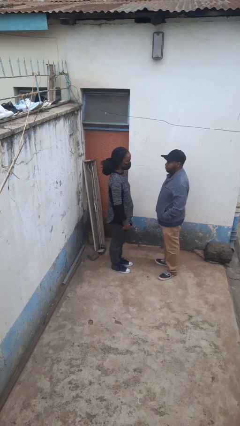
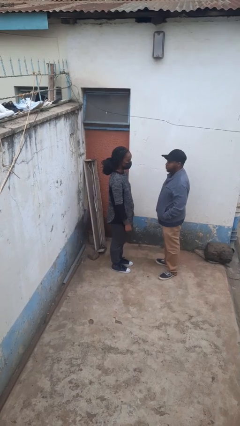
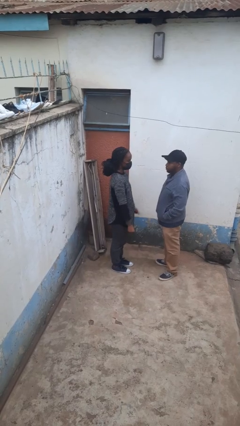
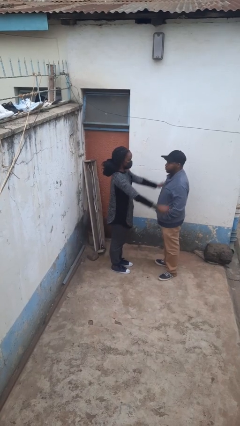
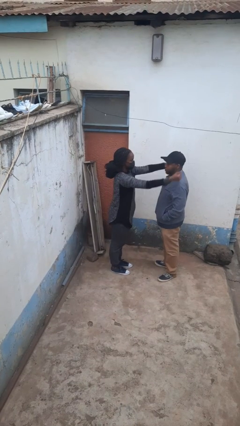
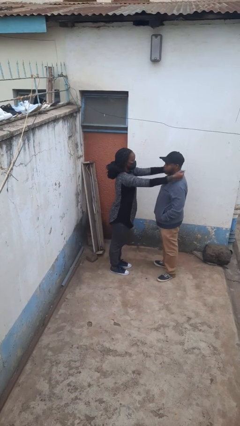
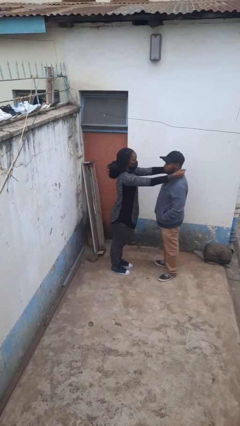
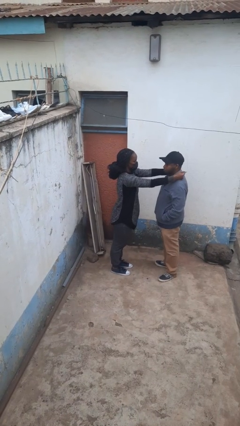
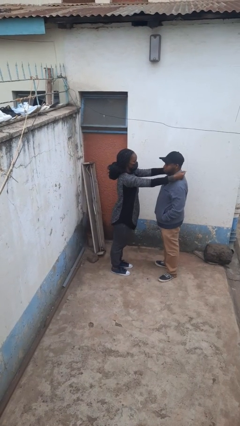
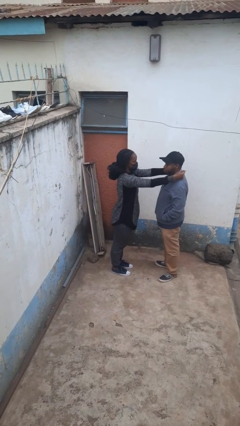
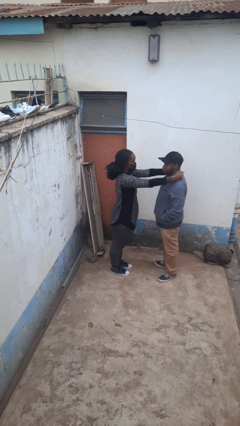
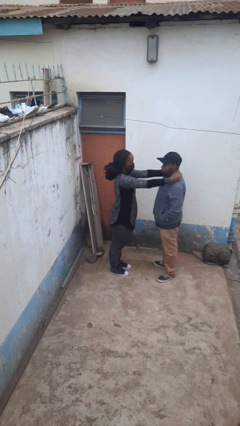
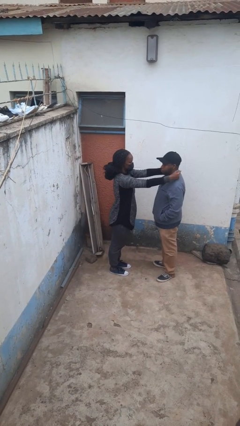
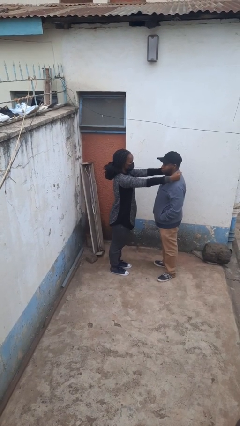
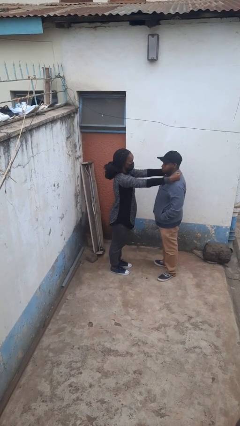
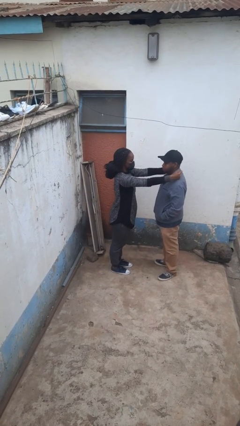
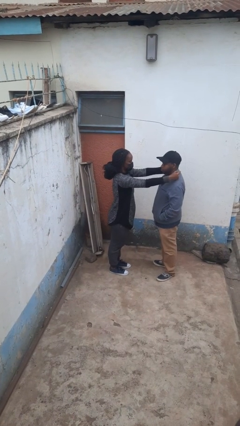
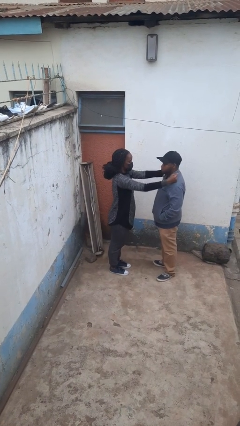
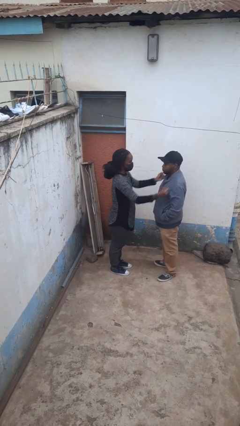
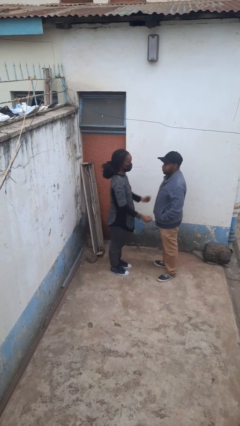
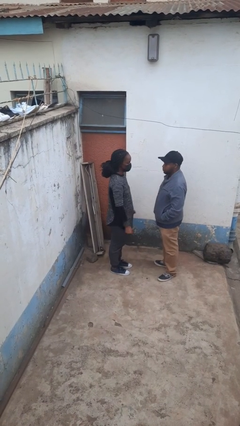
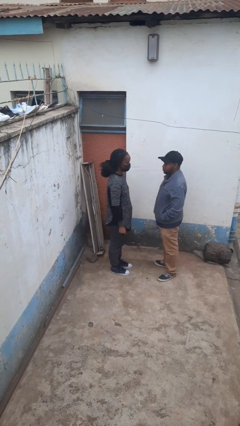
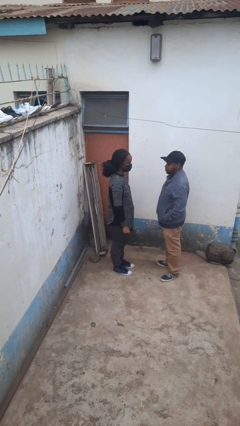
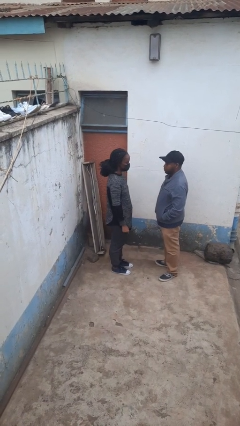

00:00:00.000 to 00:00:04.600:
person pounds shoulders of person

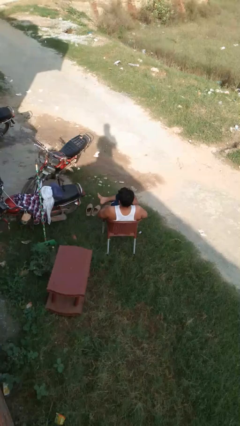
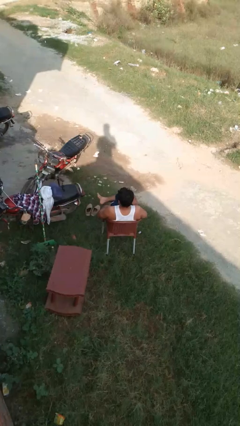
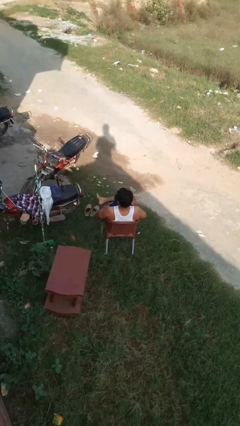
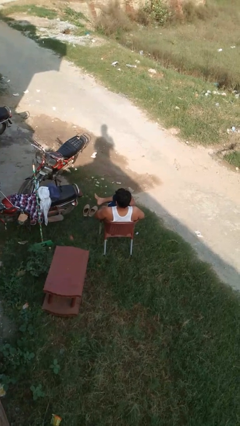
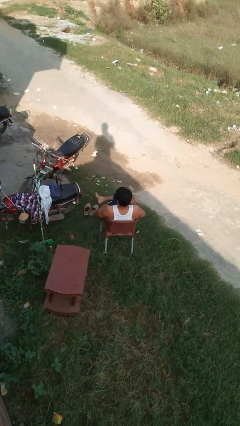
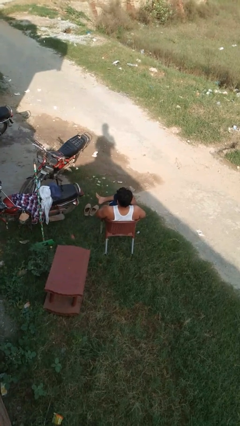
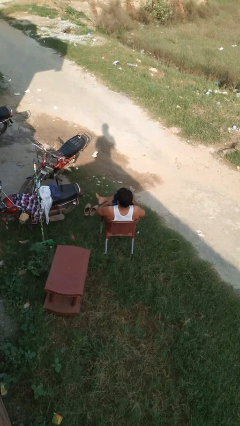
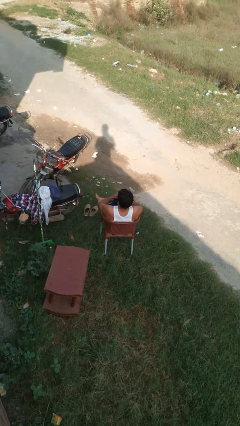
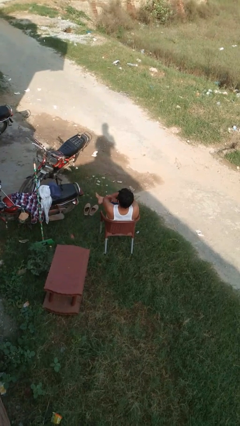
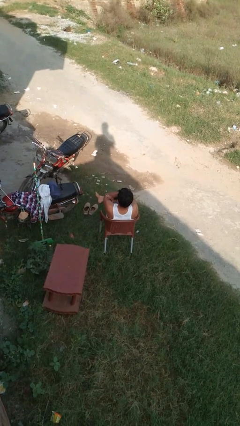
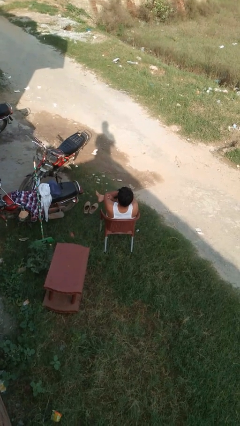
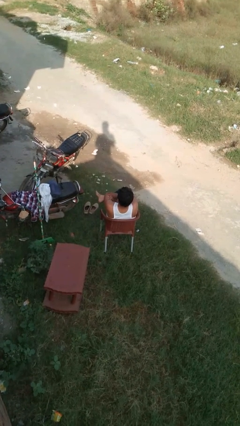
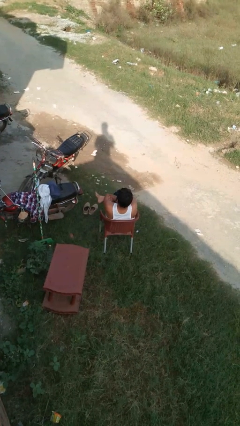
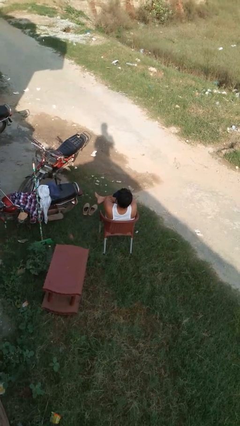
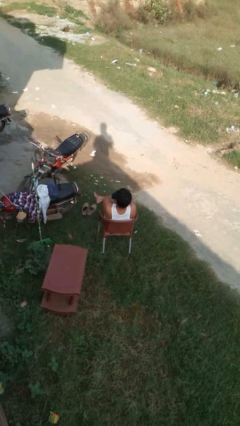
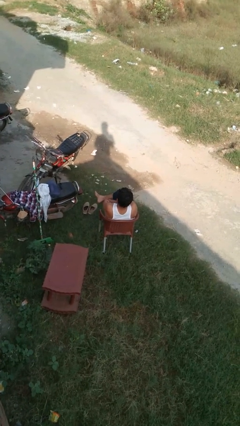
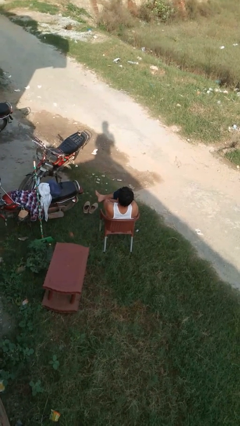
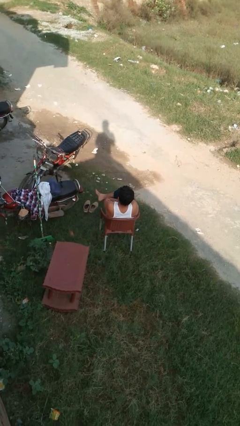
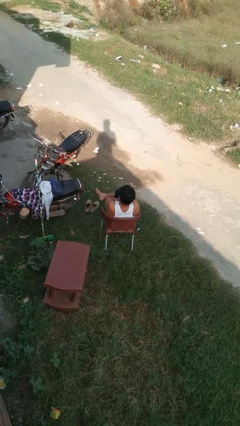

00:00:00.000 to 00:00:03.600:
person crosses arms

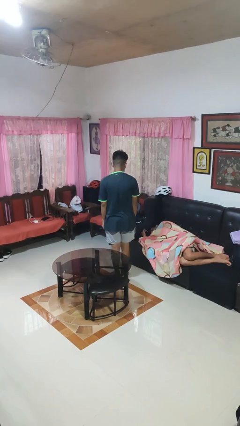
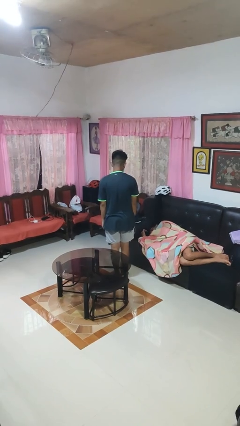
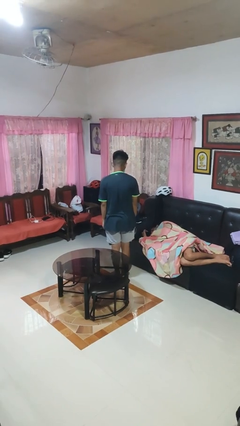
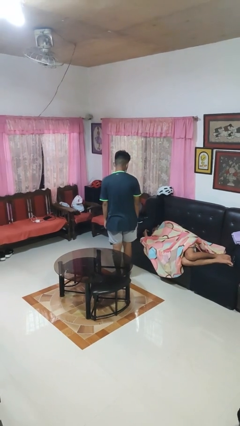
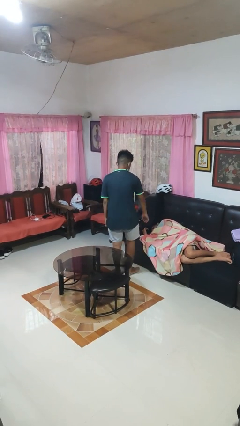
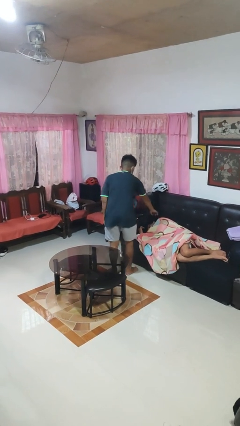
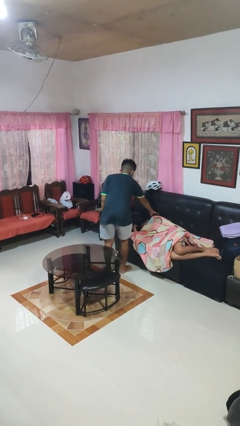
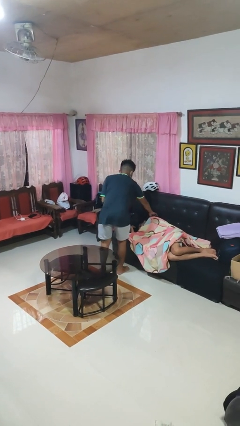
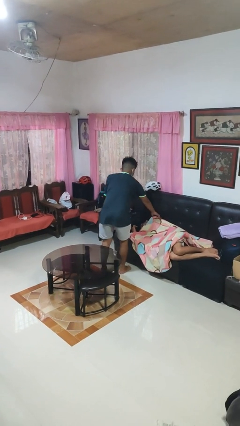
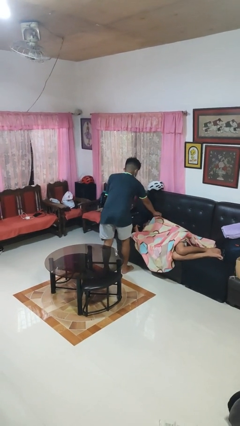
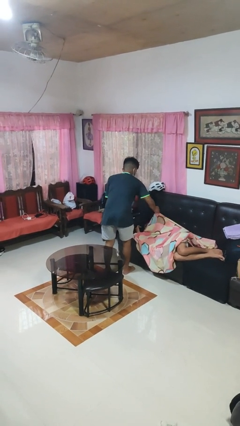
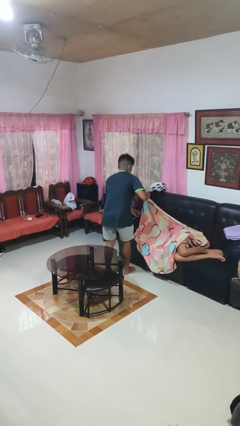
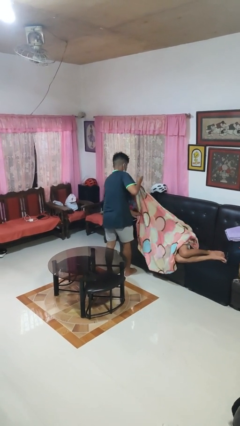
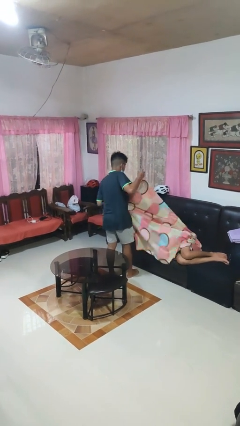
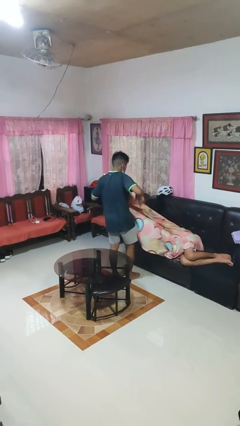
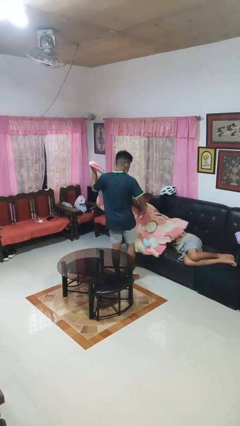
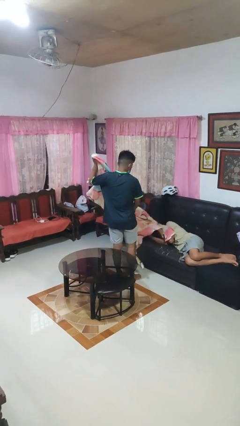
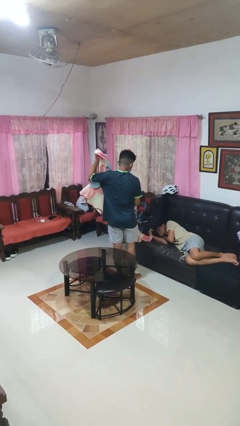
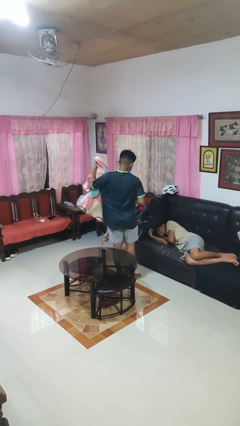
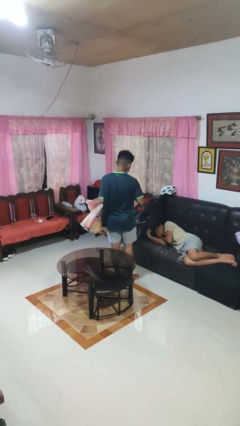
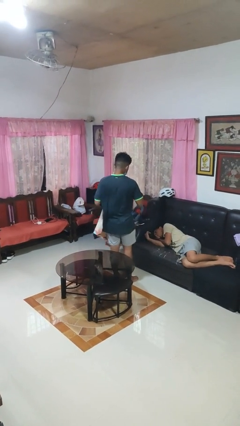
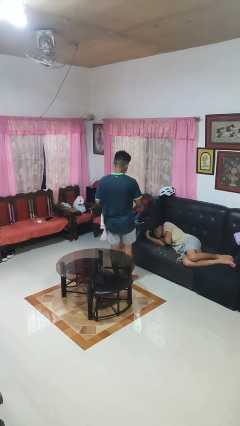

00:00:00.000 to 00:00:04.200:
person uncovers friend with blanket

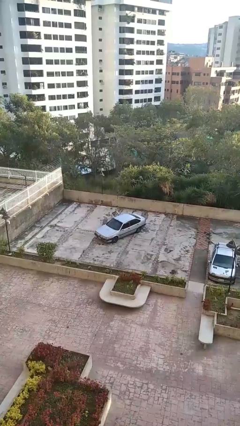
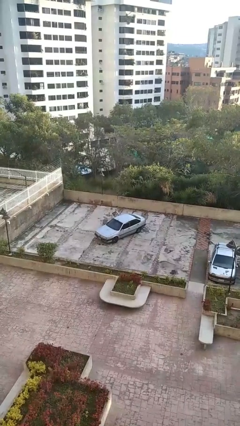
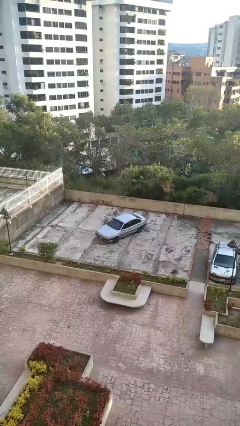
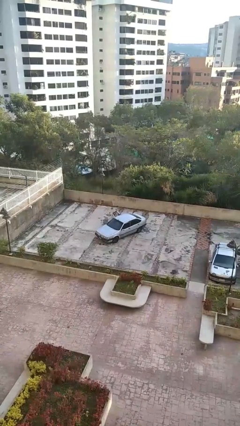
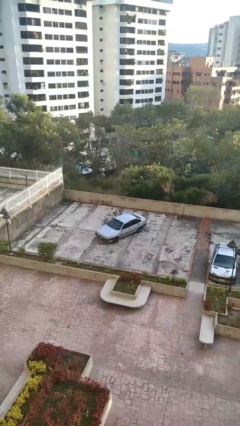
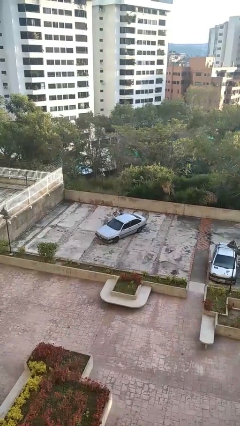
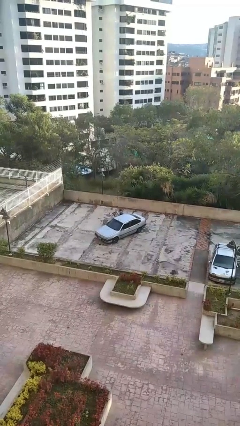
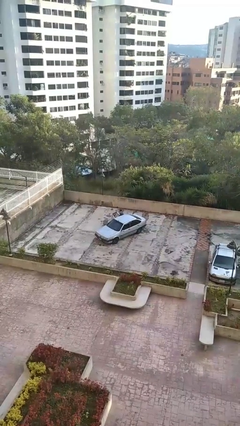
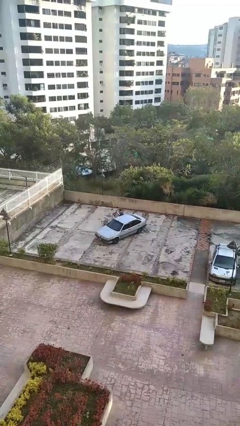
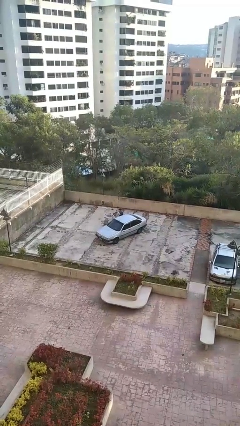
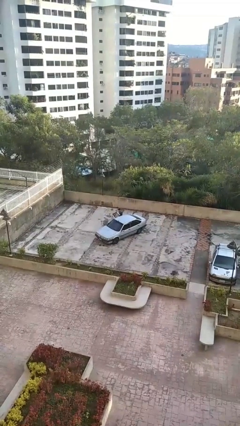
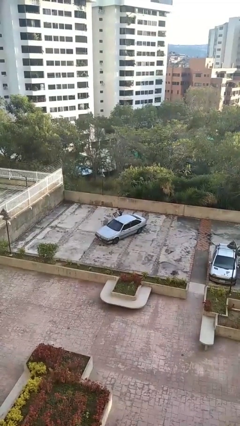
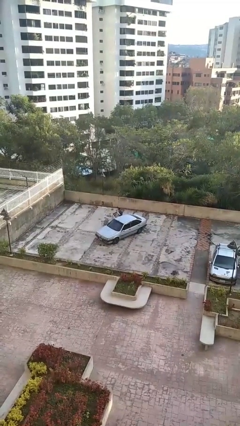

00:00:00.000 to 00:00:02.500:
person exits car

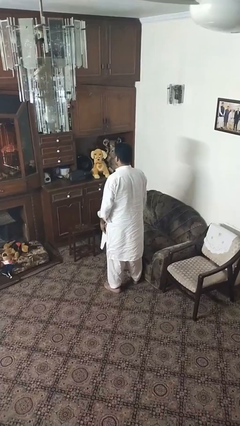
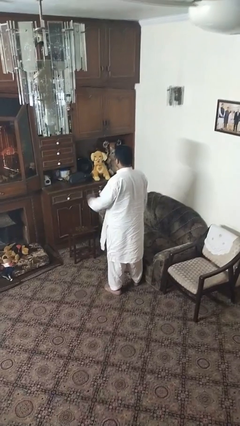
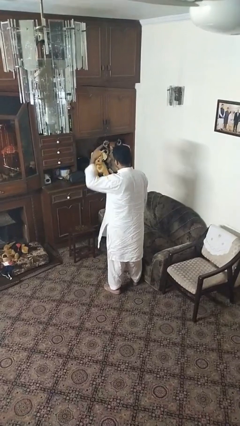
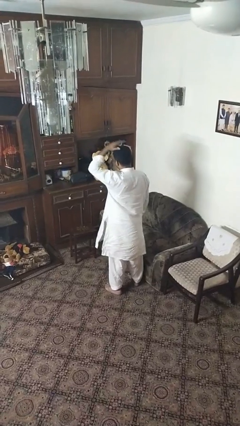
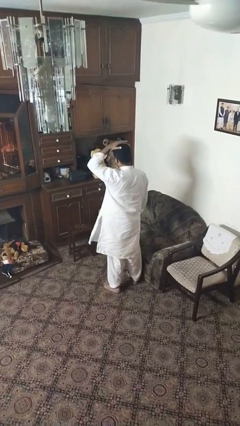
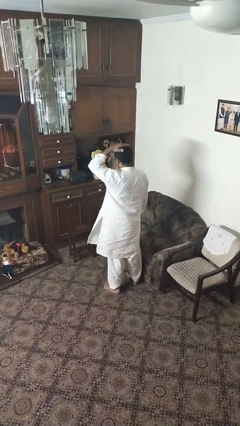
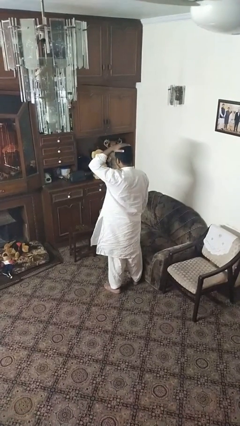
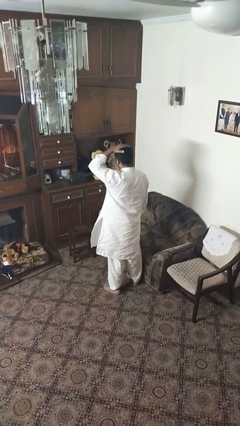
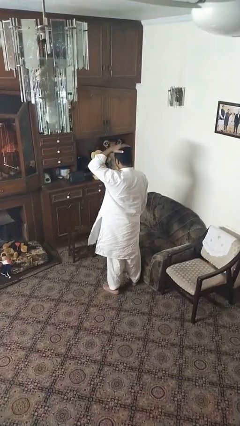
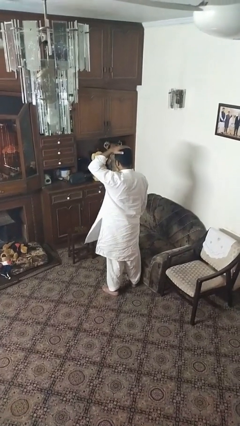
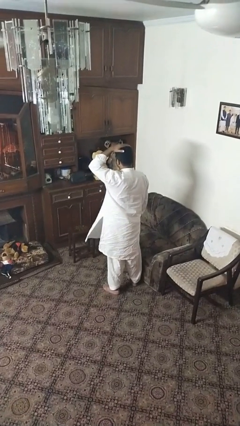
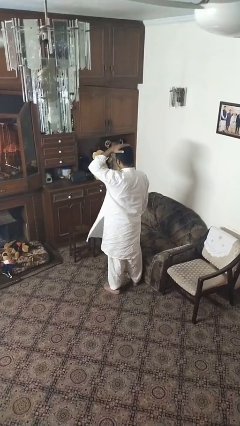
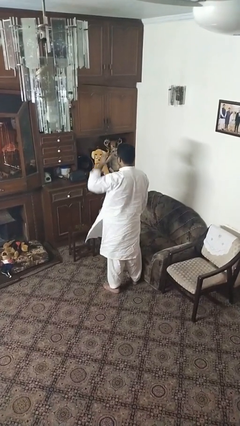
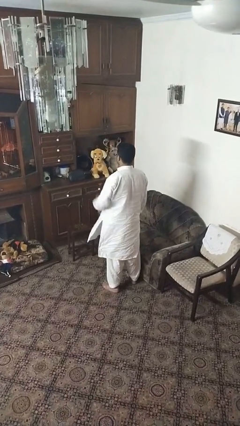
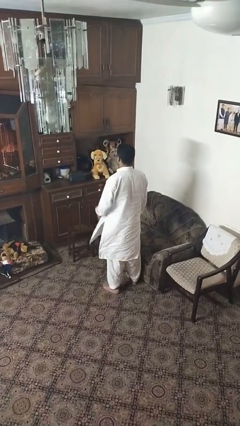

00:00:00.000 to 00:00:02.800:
person pats head

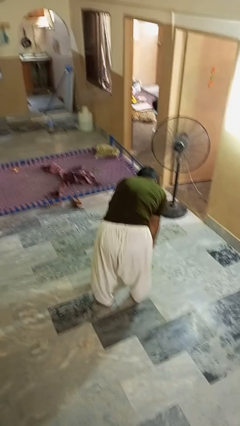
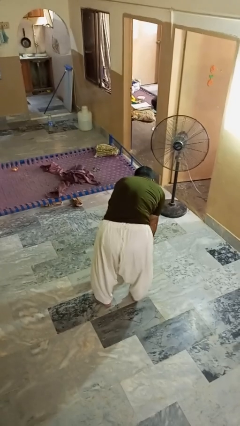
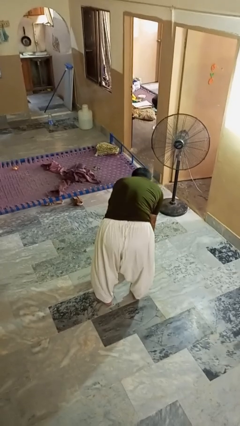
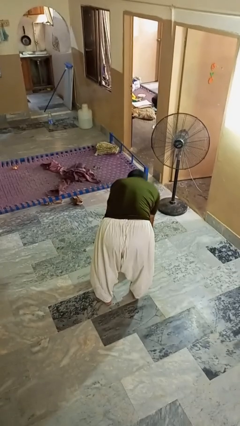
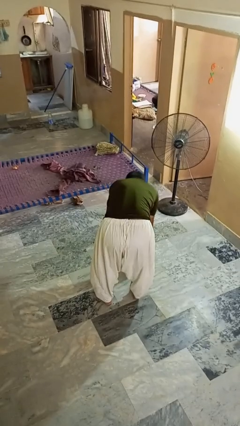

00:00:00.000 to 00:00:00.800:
person catches dropped object
